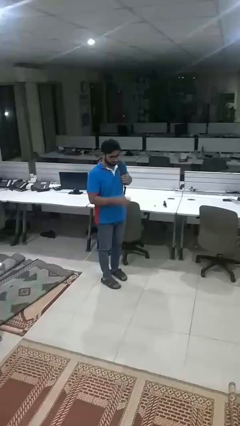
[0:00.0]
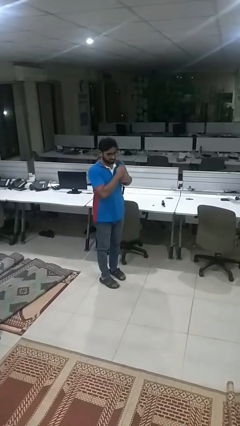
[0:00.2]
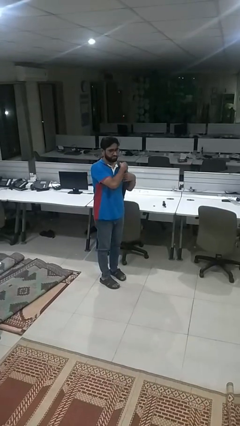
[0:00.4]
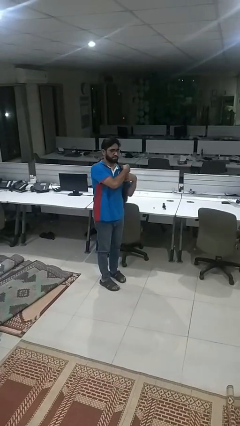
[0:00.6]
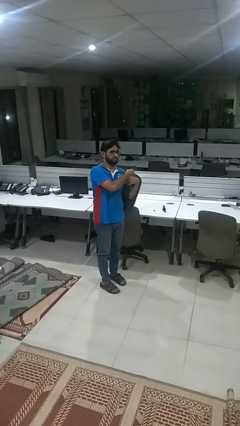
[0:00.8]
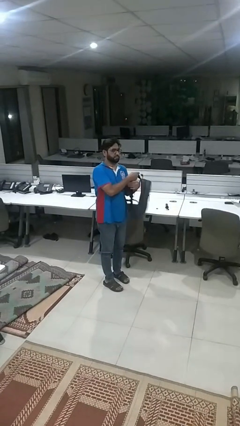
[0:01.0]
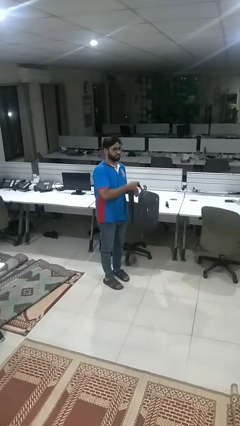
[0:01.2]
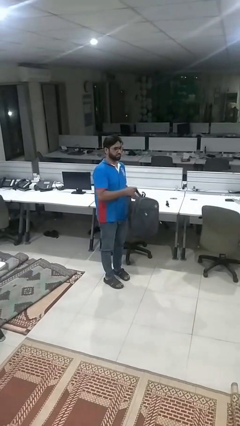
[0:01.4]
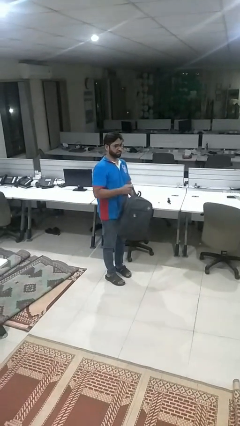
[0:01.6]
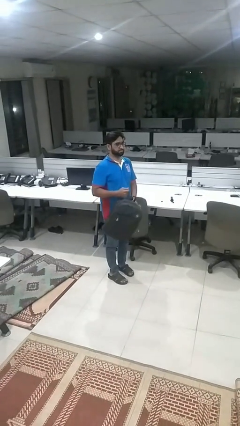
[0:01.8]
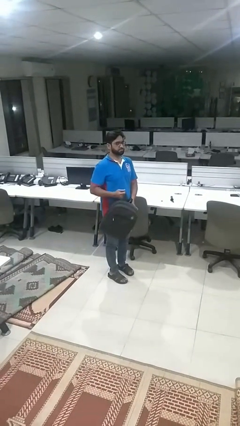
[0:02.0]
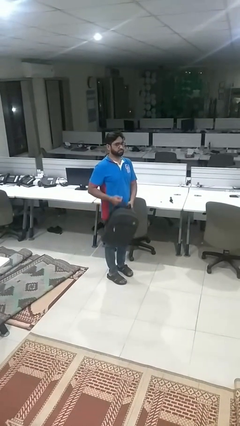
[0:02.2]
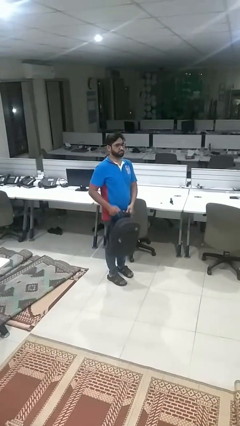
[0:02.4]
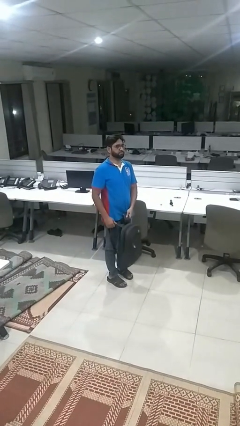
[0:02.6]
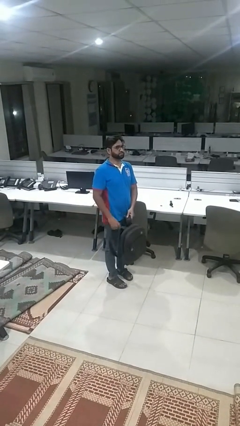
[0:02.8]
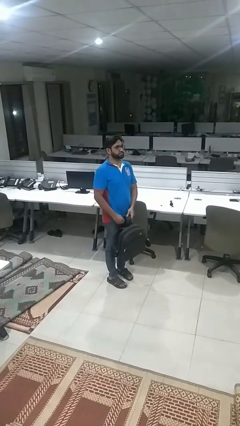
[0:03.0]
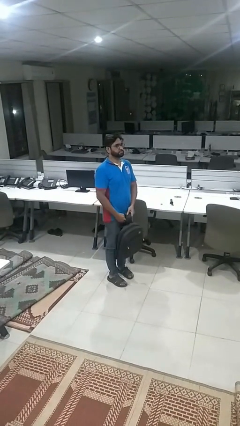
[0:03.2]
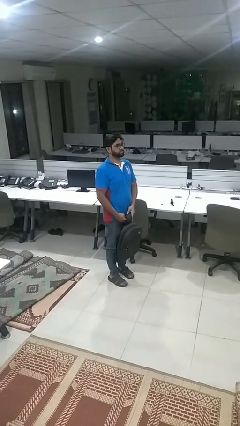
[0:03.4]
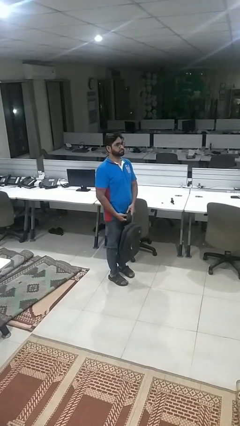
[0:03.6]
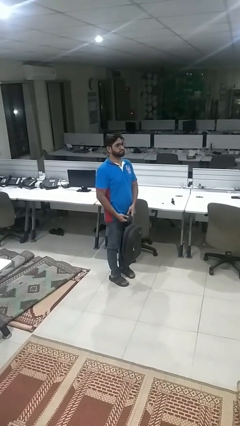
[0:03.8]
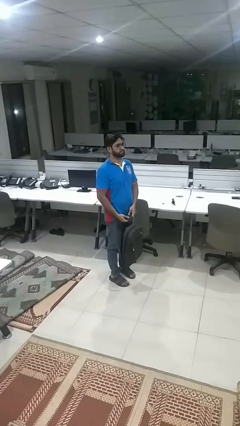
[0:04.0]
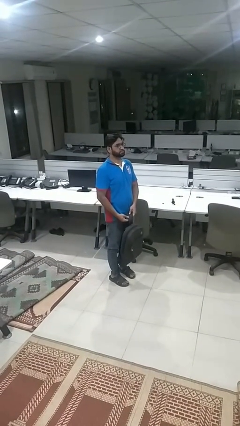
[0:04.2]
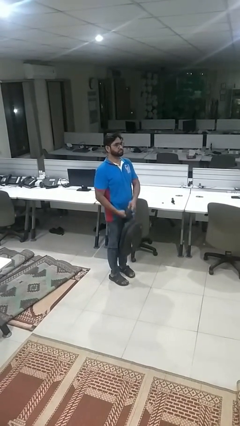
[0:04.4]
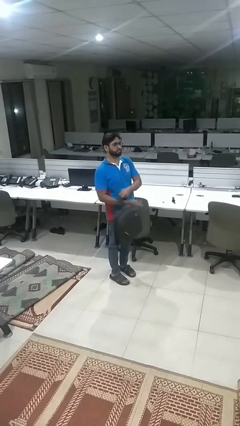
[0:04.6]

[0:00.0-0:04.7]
person takes off backpack

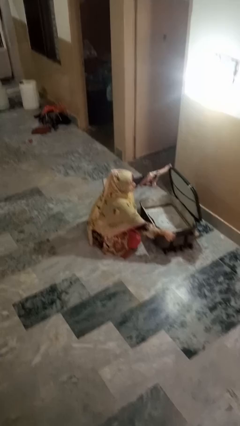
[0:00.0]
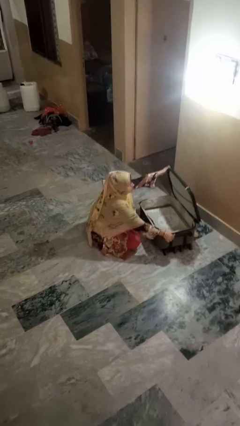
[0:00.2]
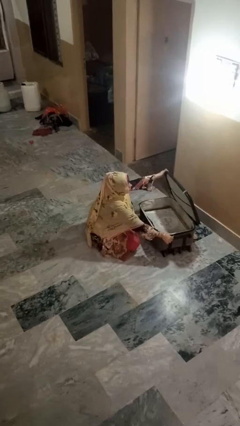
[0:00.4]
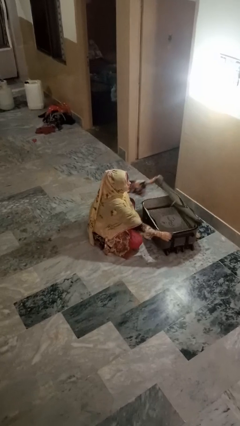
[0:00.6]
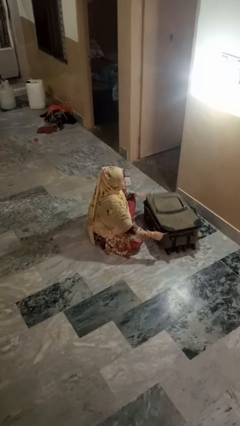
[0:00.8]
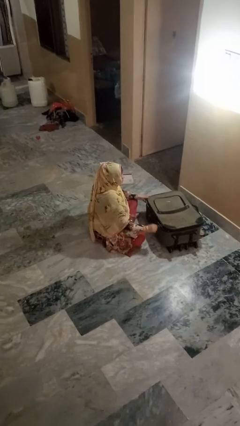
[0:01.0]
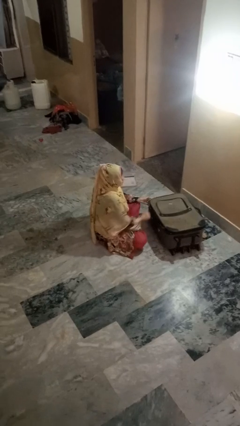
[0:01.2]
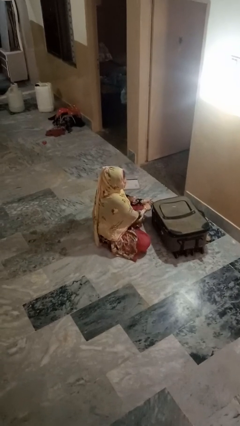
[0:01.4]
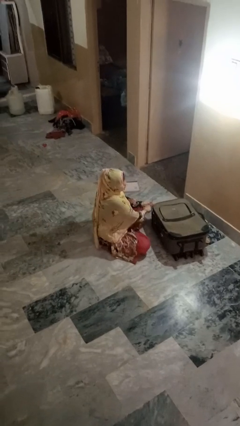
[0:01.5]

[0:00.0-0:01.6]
person closes suitcase

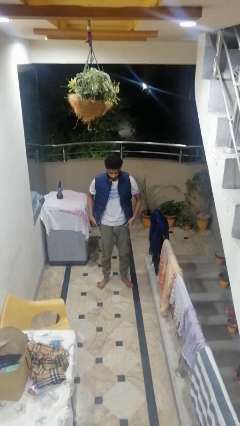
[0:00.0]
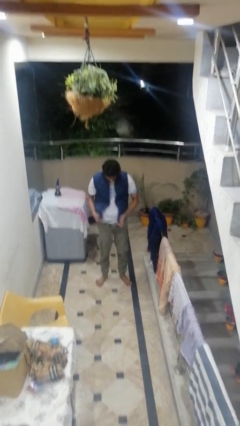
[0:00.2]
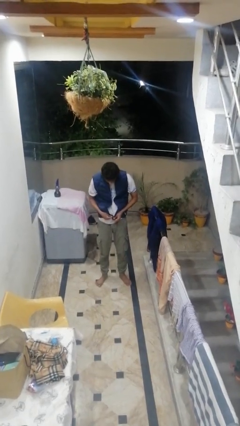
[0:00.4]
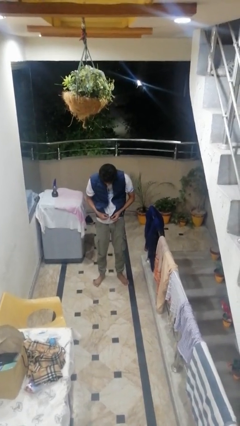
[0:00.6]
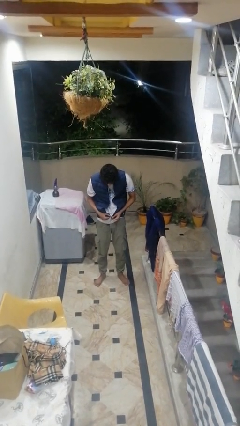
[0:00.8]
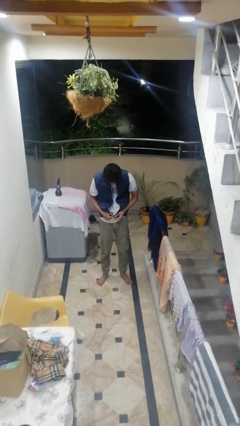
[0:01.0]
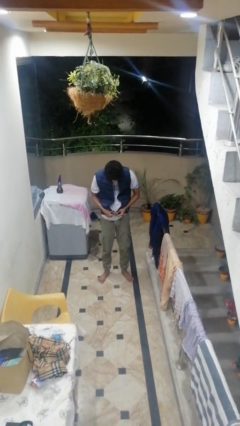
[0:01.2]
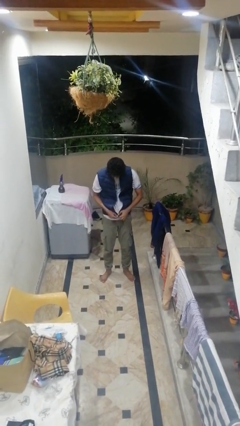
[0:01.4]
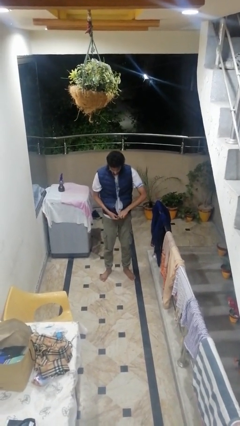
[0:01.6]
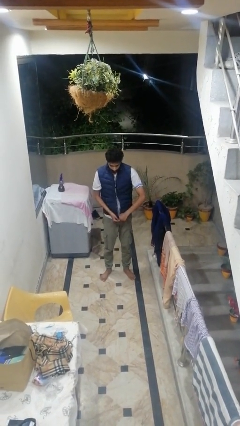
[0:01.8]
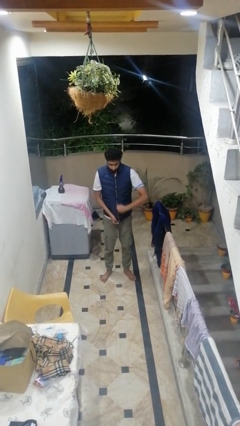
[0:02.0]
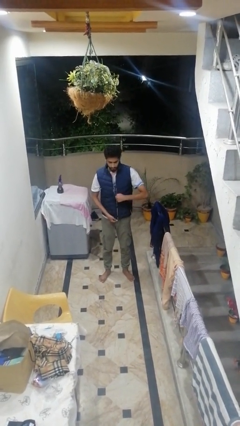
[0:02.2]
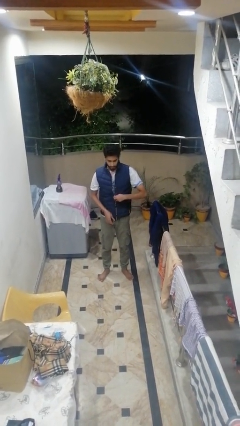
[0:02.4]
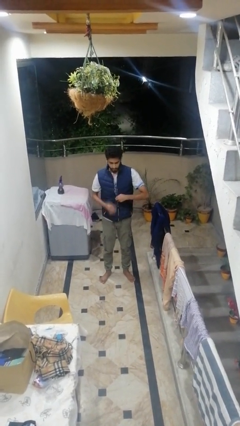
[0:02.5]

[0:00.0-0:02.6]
person zips up jacket

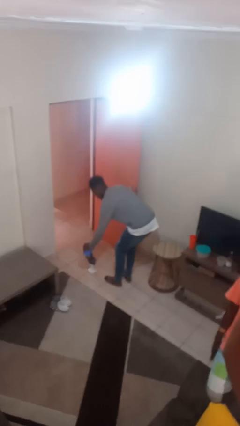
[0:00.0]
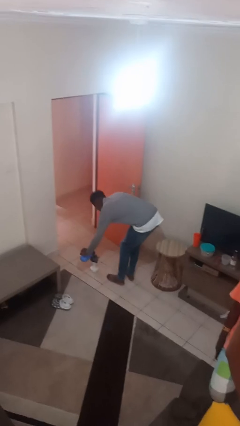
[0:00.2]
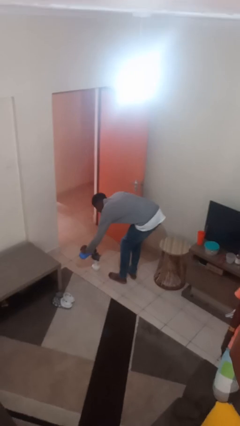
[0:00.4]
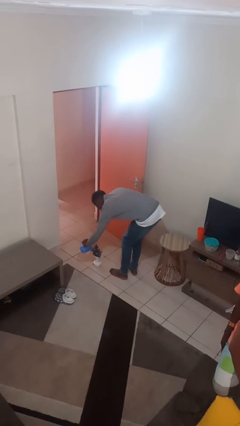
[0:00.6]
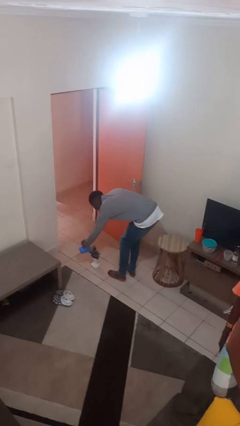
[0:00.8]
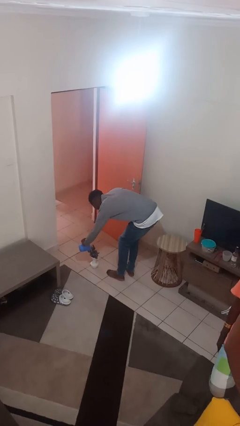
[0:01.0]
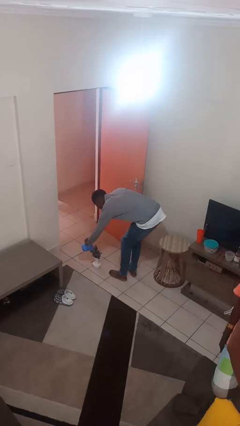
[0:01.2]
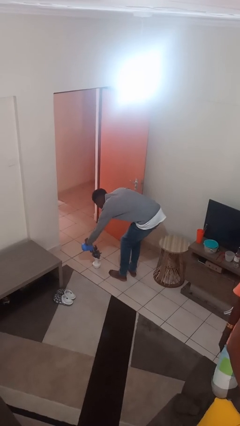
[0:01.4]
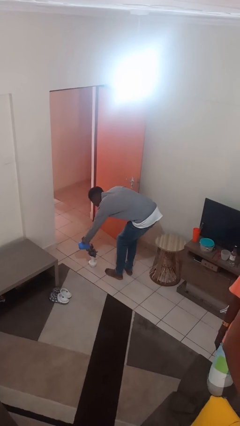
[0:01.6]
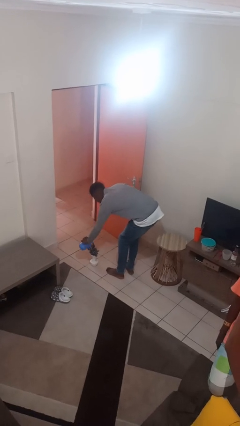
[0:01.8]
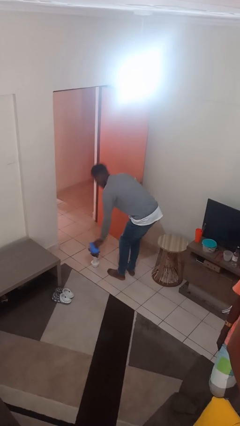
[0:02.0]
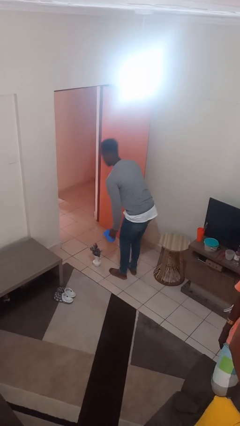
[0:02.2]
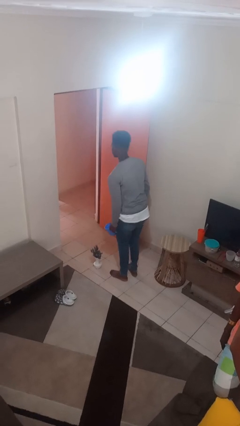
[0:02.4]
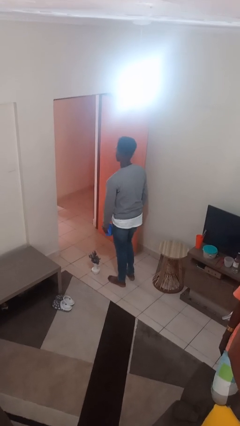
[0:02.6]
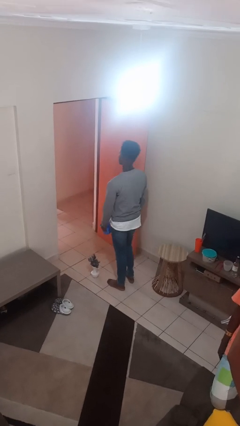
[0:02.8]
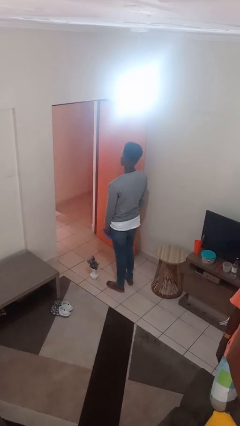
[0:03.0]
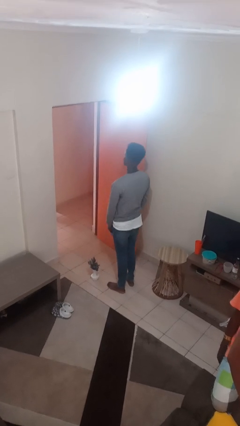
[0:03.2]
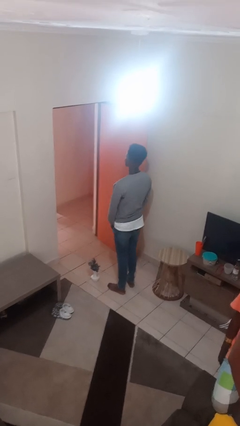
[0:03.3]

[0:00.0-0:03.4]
person waters houseplant

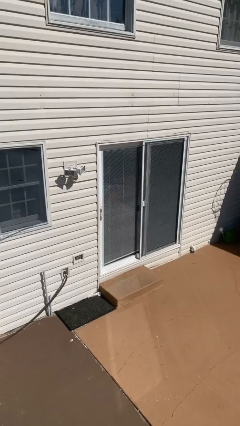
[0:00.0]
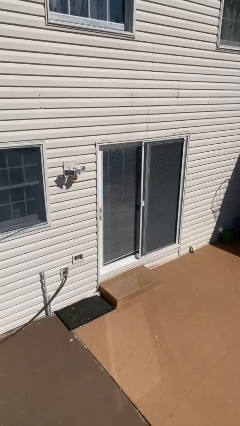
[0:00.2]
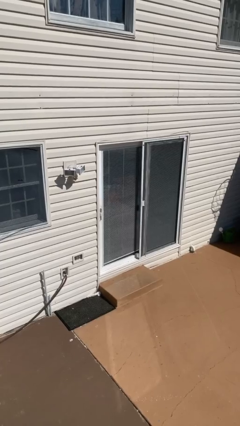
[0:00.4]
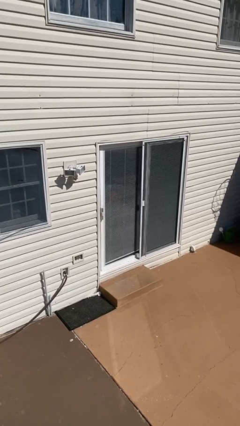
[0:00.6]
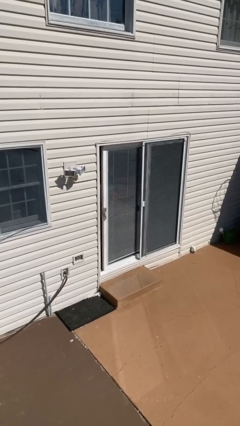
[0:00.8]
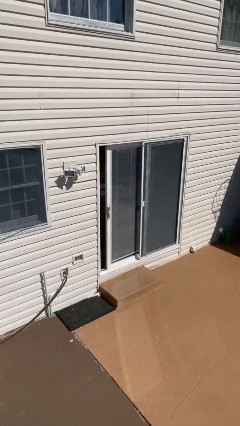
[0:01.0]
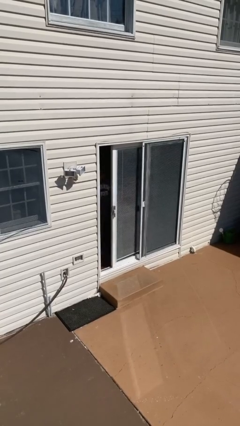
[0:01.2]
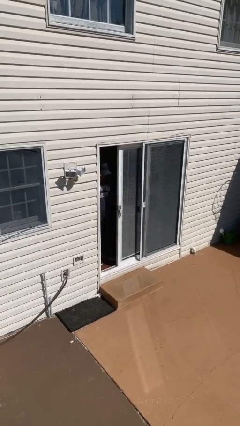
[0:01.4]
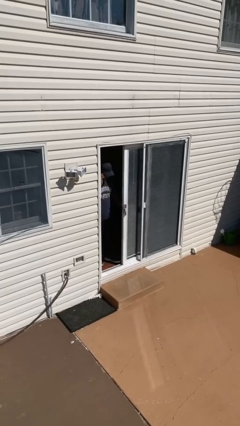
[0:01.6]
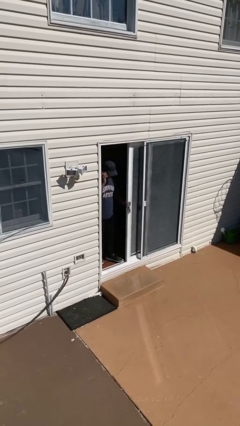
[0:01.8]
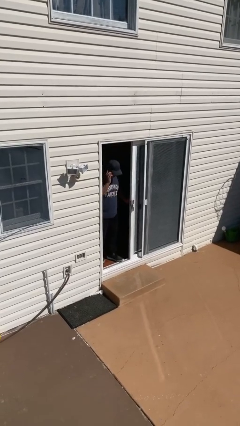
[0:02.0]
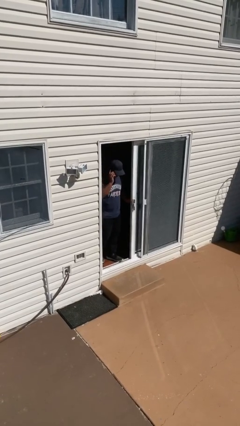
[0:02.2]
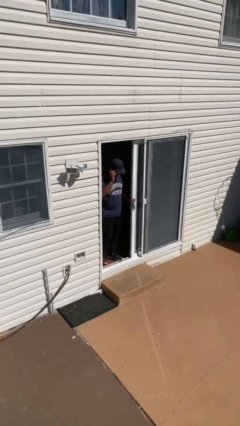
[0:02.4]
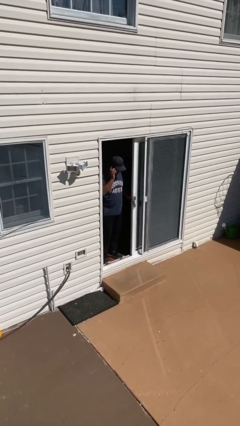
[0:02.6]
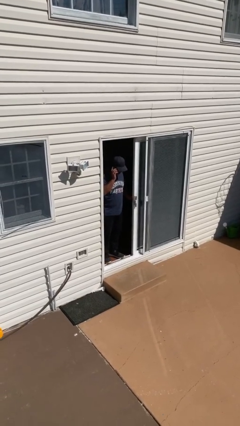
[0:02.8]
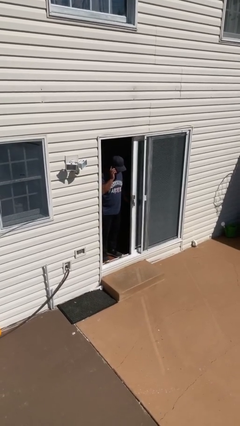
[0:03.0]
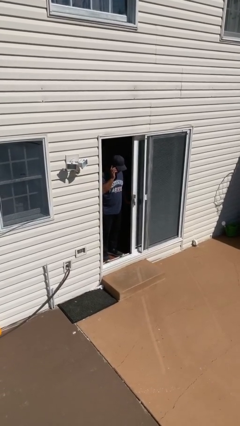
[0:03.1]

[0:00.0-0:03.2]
person opens facility door

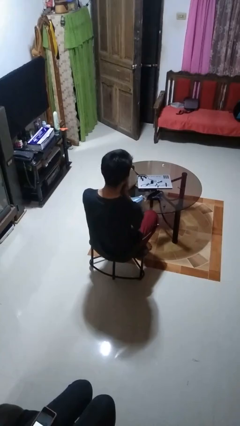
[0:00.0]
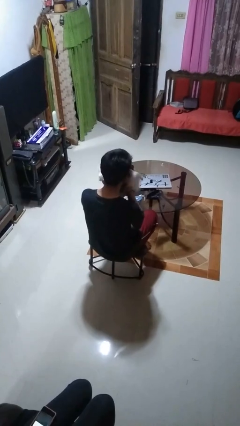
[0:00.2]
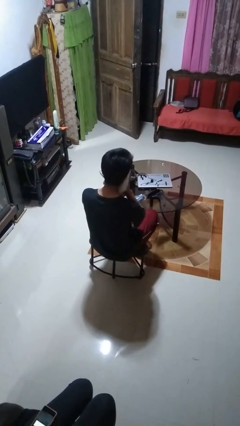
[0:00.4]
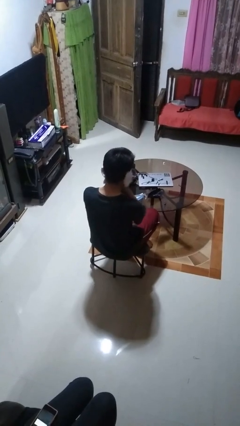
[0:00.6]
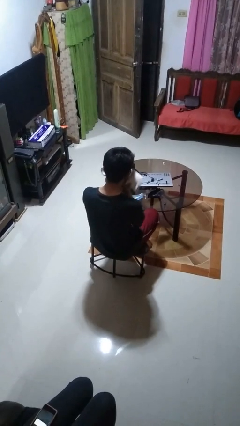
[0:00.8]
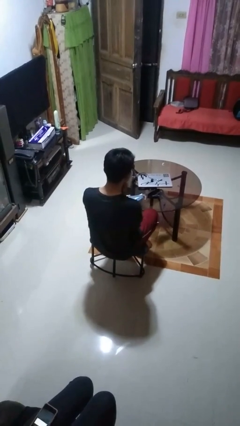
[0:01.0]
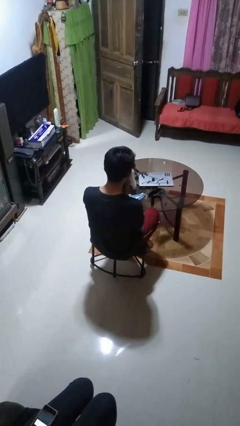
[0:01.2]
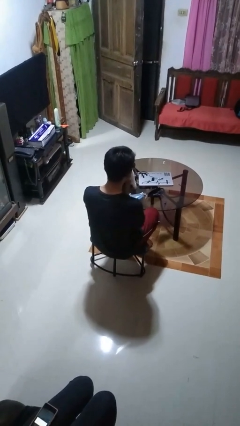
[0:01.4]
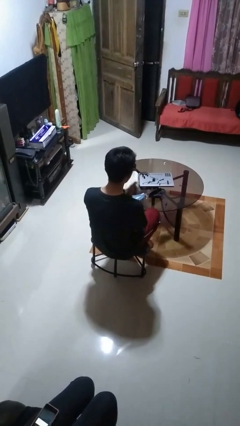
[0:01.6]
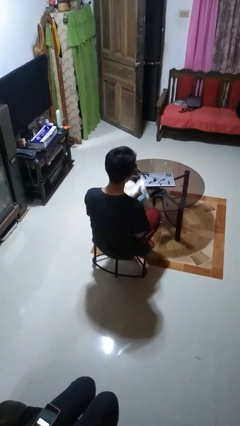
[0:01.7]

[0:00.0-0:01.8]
person wipes mouth with napkin
